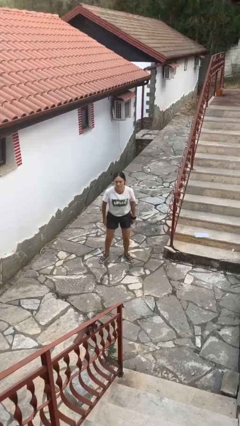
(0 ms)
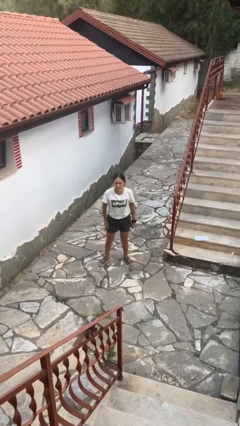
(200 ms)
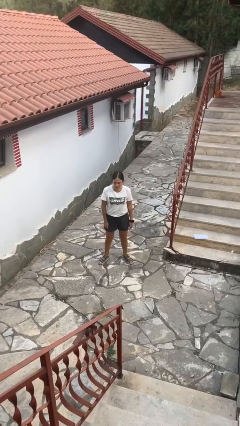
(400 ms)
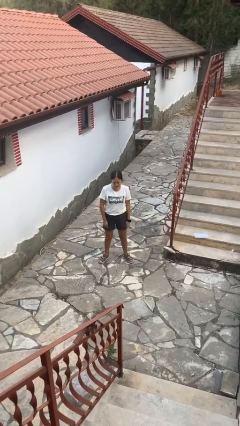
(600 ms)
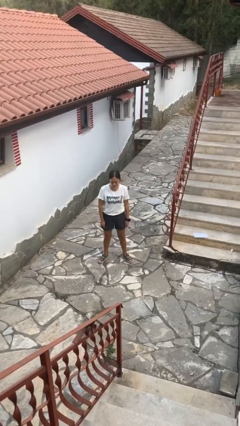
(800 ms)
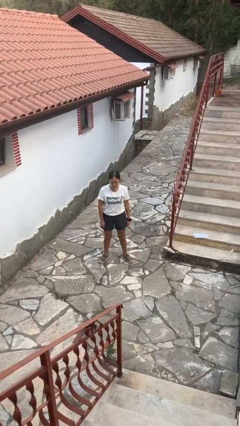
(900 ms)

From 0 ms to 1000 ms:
person stands up

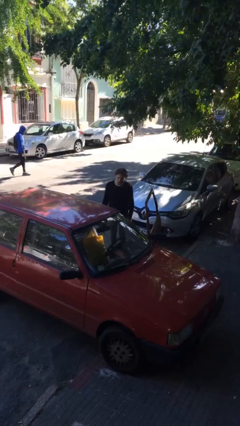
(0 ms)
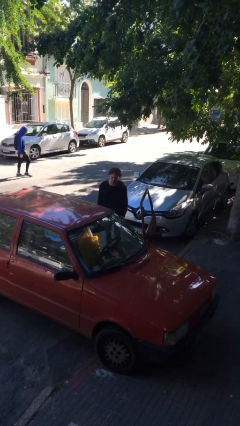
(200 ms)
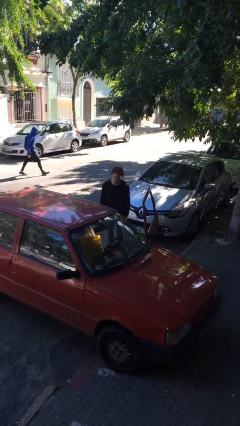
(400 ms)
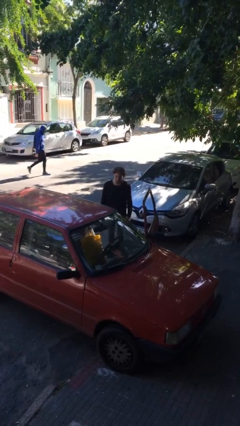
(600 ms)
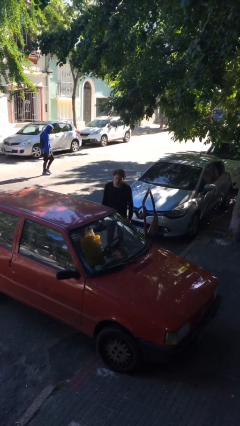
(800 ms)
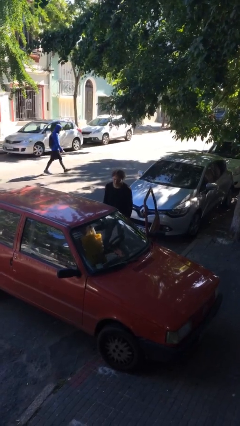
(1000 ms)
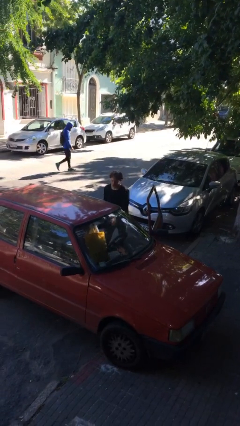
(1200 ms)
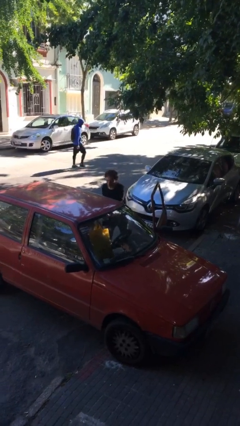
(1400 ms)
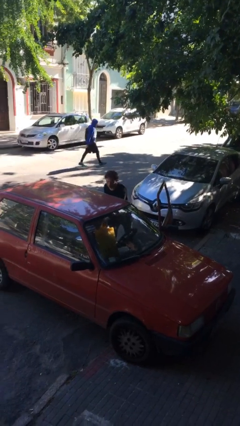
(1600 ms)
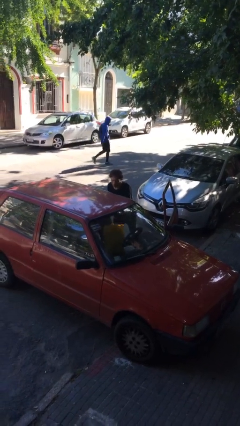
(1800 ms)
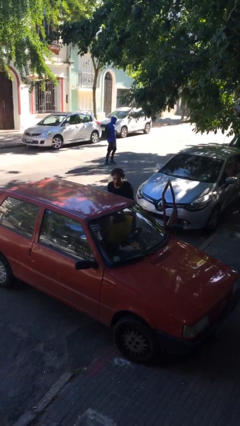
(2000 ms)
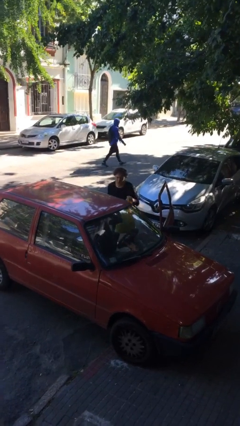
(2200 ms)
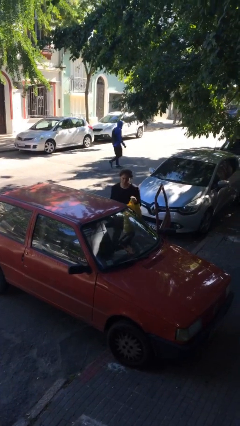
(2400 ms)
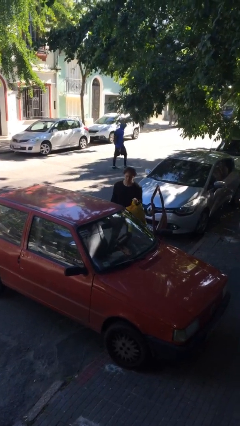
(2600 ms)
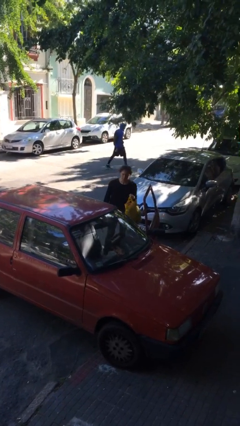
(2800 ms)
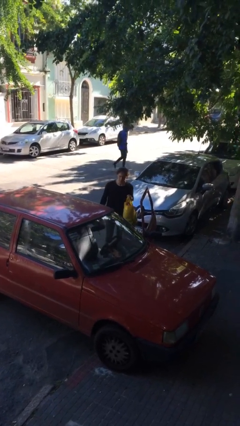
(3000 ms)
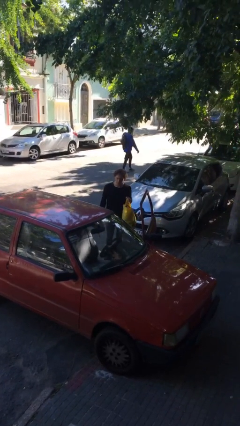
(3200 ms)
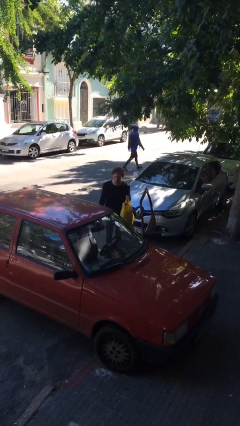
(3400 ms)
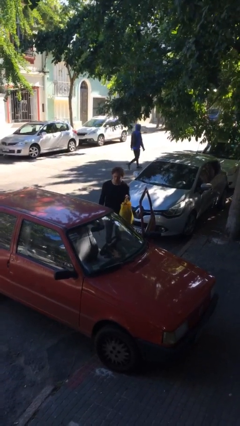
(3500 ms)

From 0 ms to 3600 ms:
person unloads car

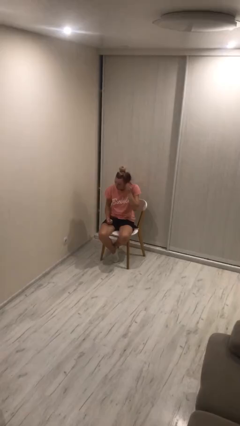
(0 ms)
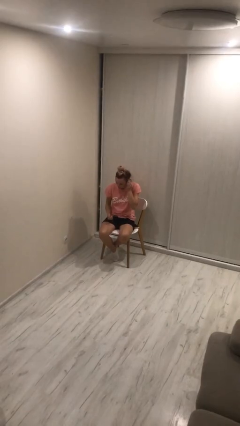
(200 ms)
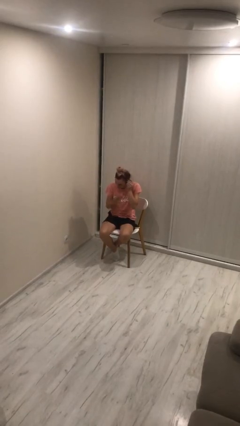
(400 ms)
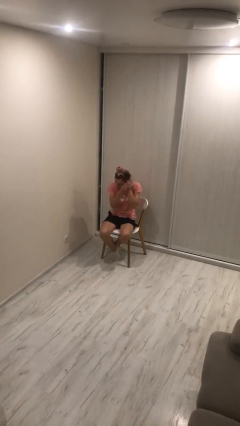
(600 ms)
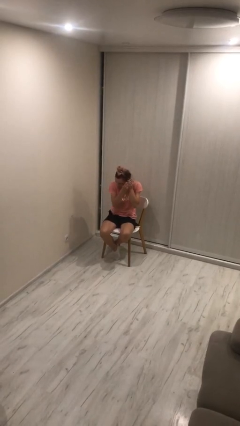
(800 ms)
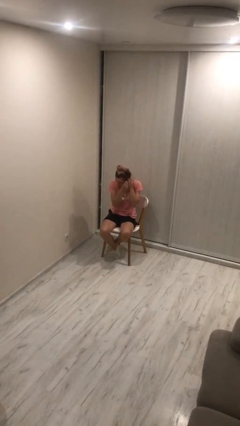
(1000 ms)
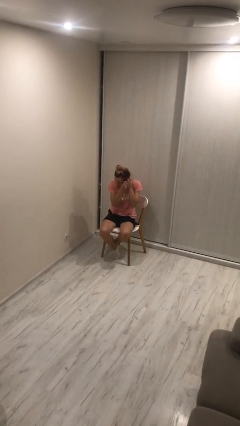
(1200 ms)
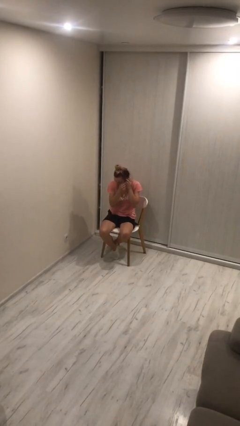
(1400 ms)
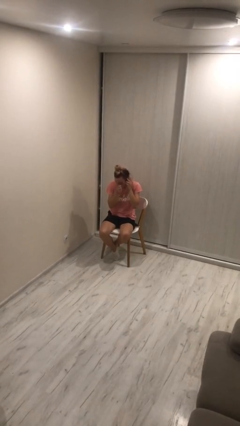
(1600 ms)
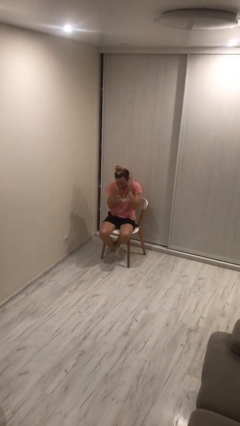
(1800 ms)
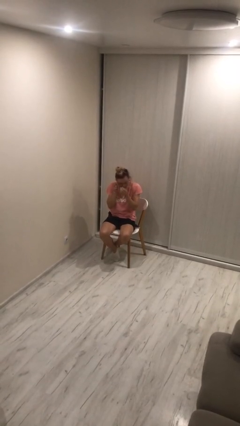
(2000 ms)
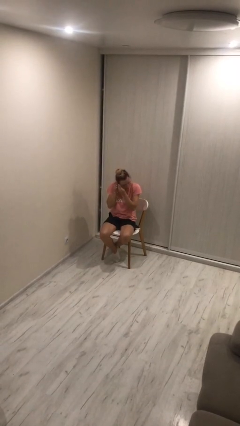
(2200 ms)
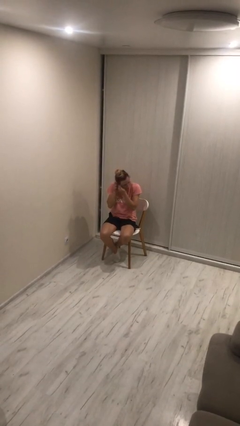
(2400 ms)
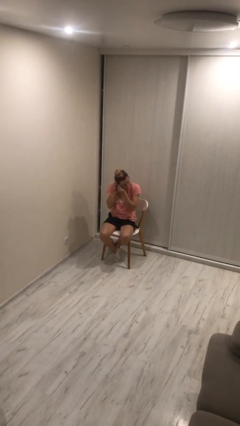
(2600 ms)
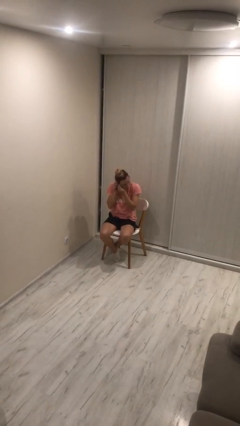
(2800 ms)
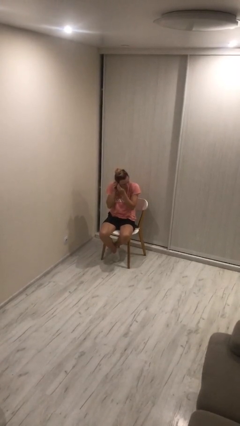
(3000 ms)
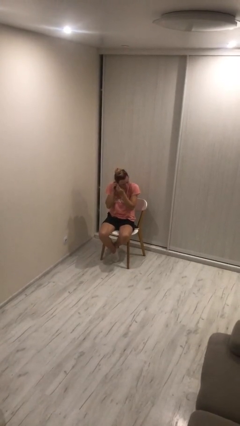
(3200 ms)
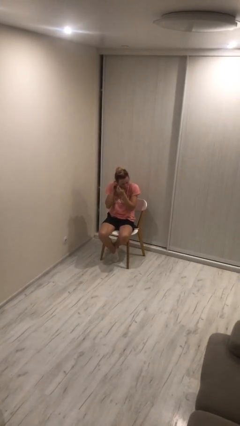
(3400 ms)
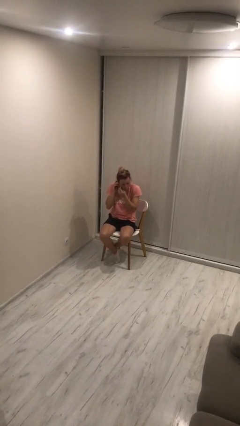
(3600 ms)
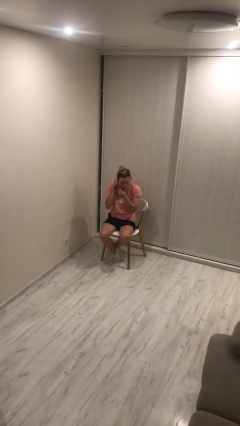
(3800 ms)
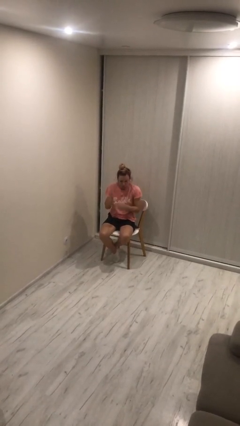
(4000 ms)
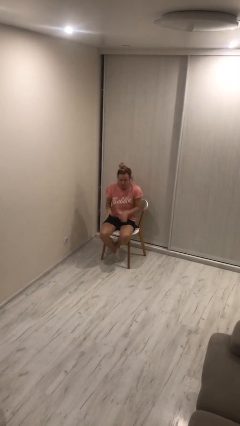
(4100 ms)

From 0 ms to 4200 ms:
person puts on earrings

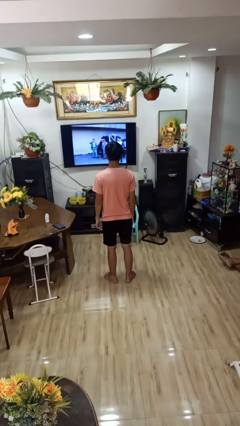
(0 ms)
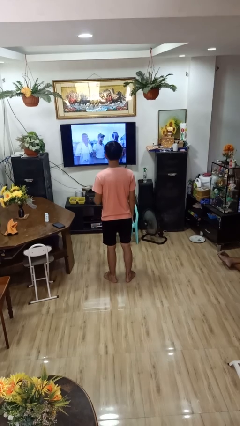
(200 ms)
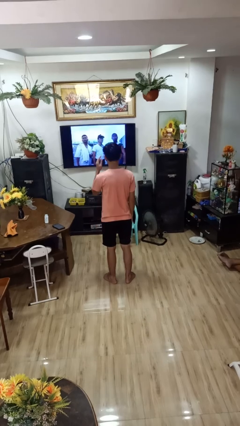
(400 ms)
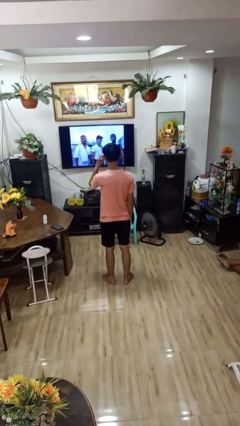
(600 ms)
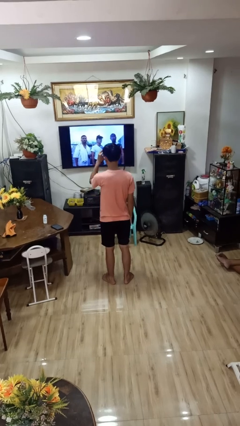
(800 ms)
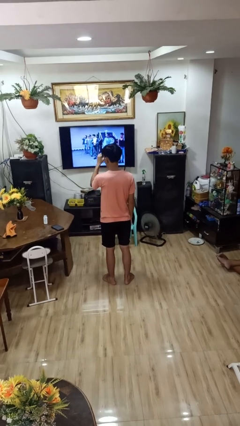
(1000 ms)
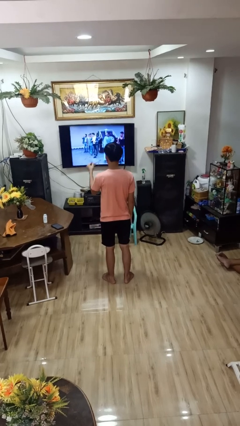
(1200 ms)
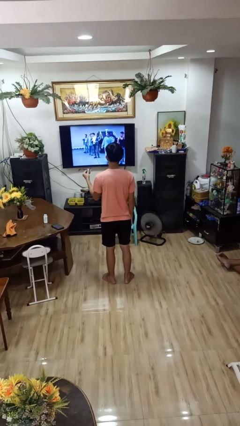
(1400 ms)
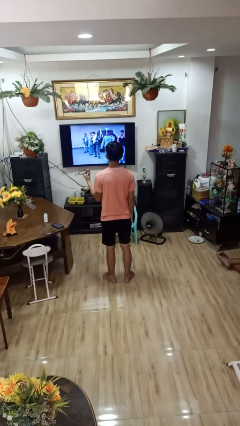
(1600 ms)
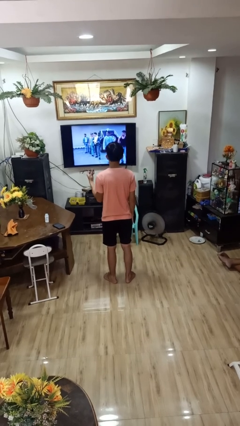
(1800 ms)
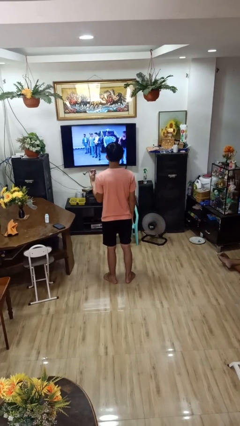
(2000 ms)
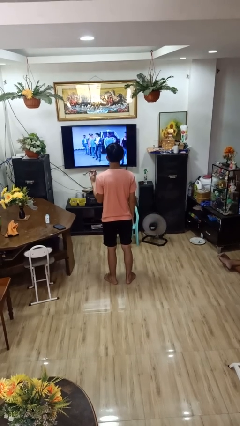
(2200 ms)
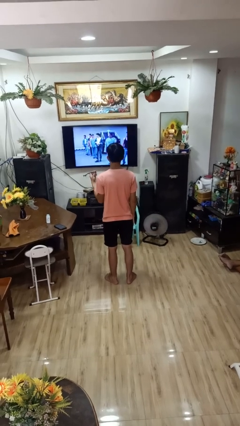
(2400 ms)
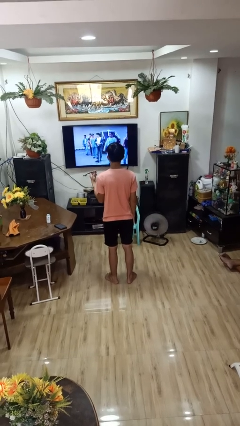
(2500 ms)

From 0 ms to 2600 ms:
person takes off glasses

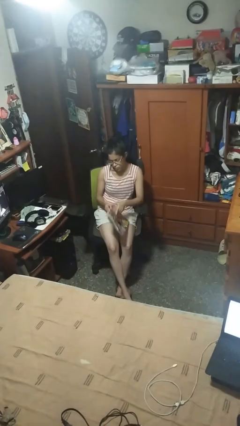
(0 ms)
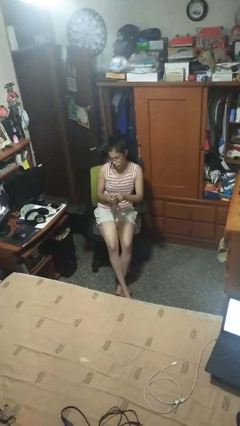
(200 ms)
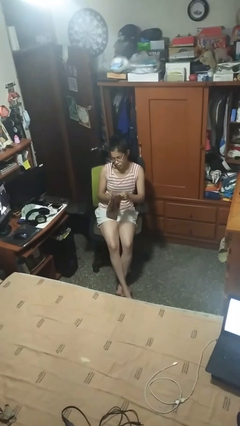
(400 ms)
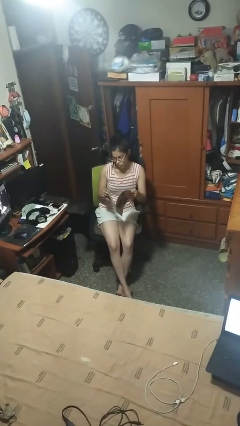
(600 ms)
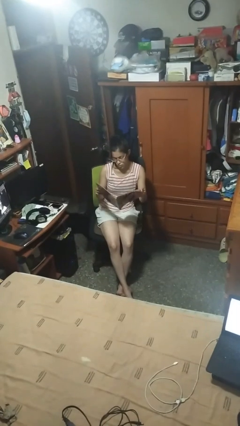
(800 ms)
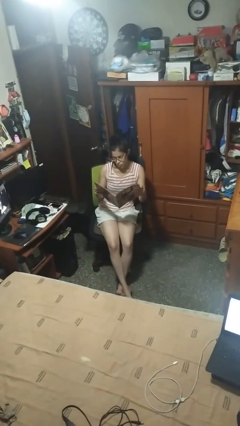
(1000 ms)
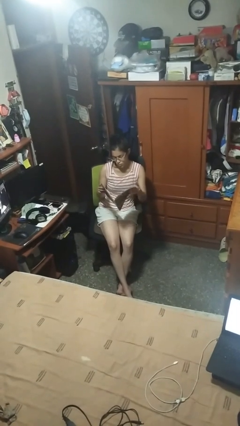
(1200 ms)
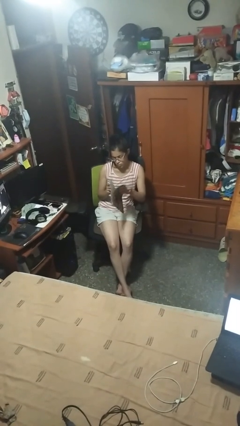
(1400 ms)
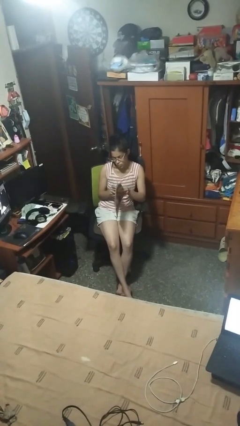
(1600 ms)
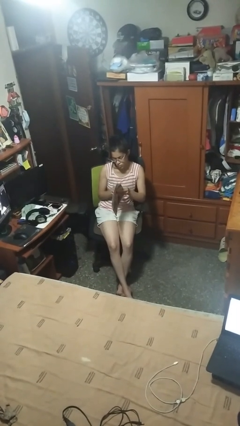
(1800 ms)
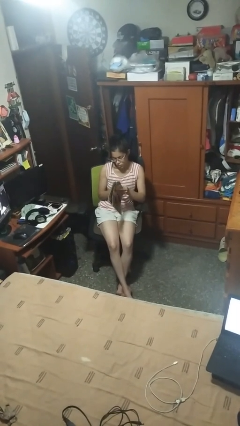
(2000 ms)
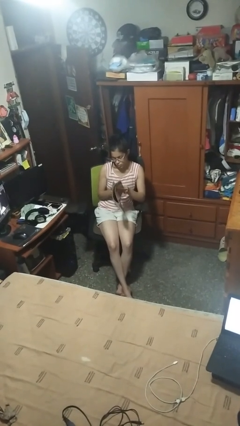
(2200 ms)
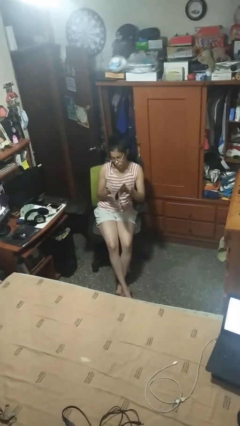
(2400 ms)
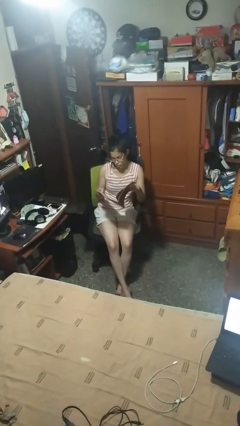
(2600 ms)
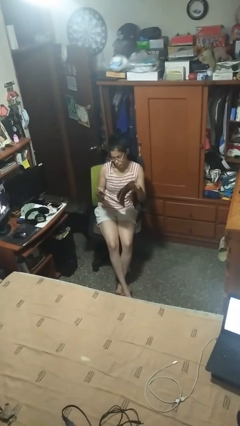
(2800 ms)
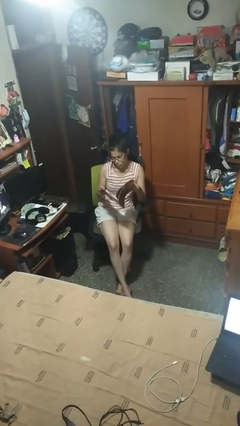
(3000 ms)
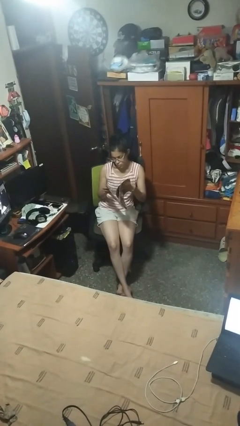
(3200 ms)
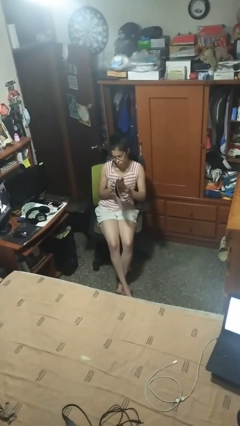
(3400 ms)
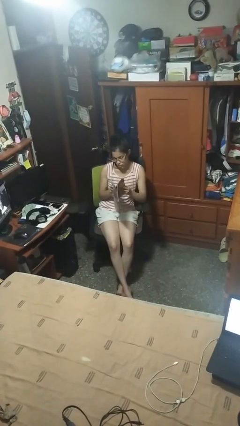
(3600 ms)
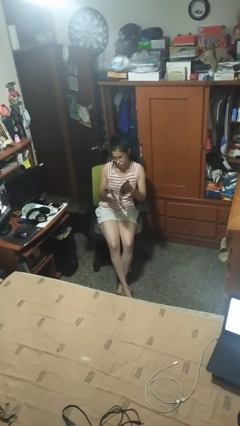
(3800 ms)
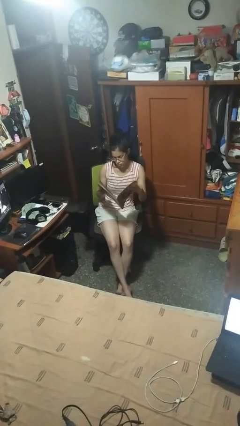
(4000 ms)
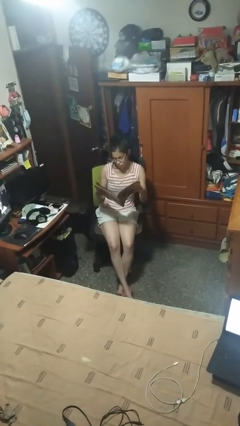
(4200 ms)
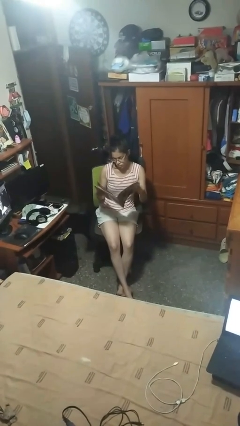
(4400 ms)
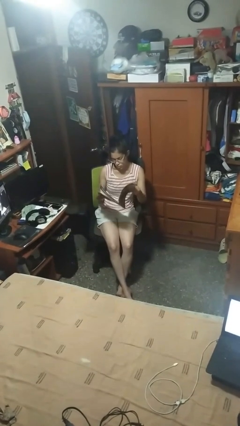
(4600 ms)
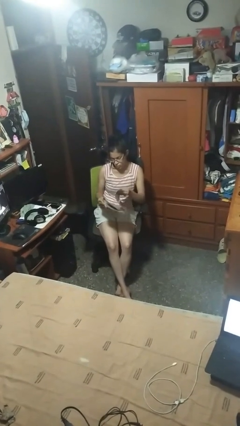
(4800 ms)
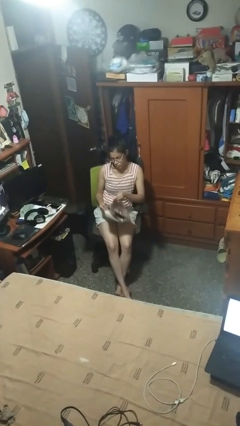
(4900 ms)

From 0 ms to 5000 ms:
person reads magazine

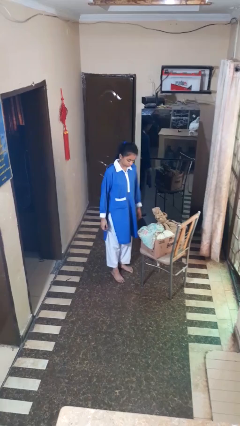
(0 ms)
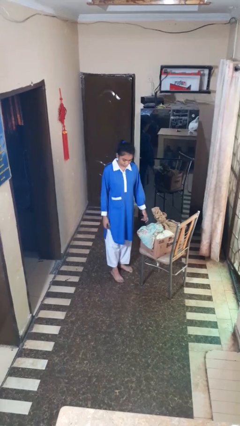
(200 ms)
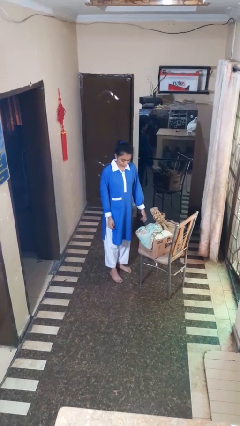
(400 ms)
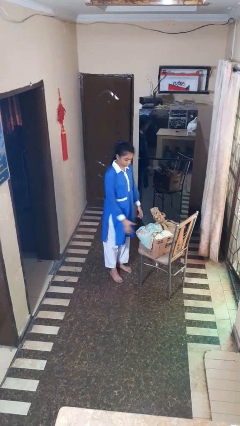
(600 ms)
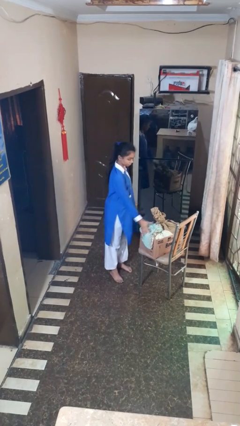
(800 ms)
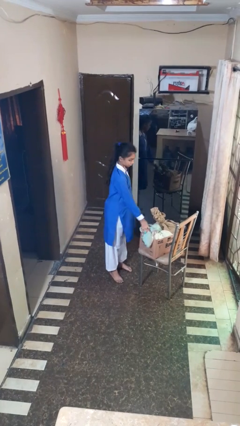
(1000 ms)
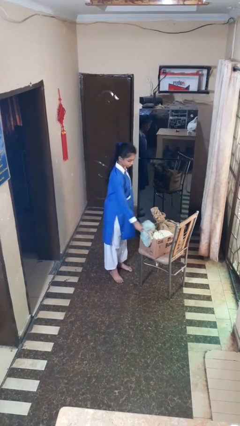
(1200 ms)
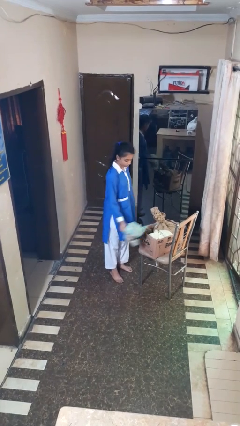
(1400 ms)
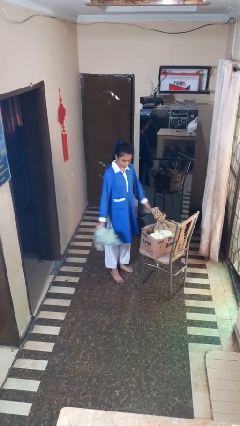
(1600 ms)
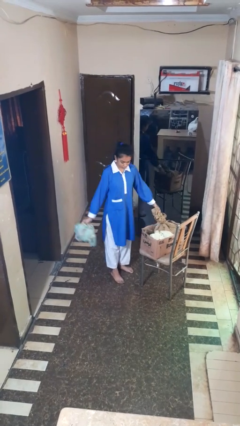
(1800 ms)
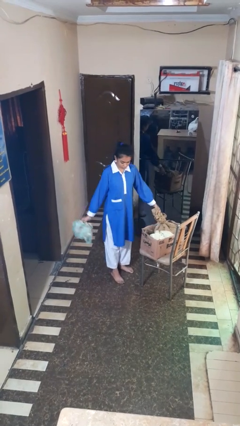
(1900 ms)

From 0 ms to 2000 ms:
person takes object from box
